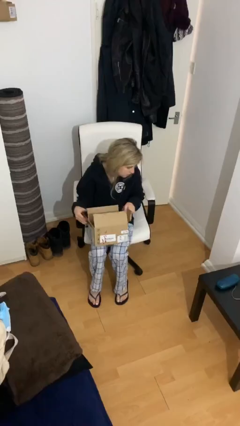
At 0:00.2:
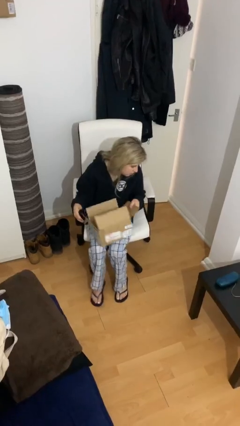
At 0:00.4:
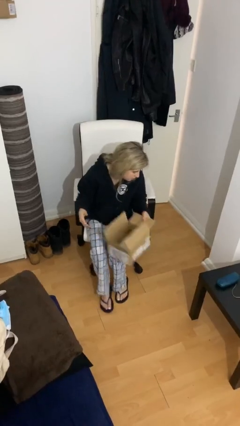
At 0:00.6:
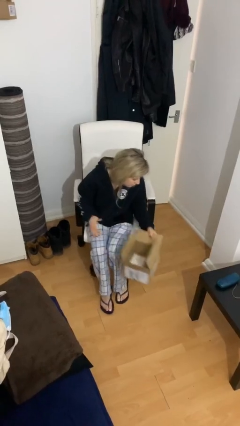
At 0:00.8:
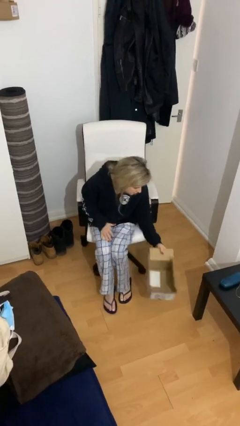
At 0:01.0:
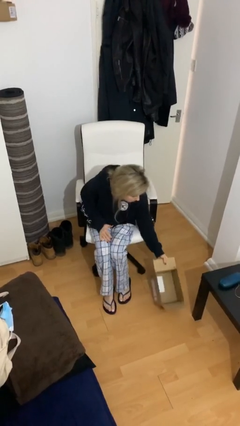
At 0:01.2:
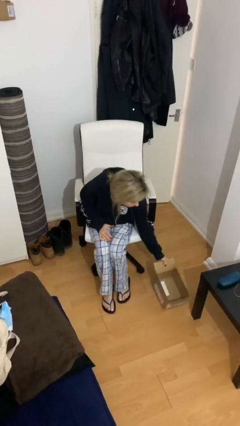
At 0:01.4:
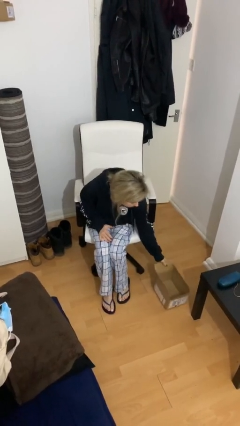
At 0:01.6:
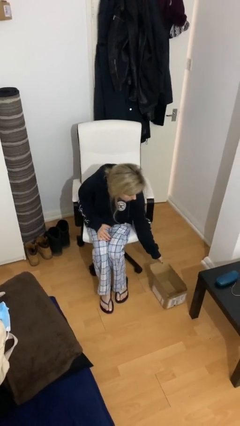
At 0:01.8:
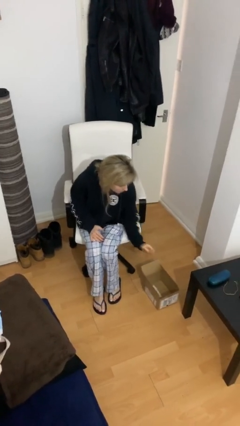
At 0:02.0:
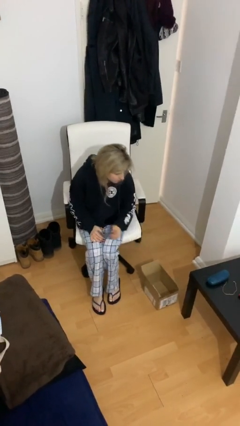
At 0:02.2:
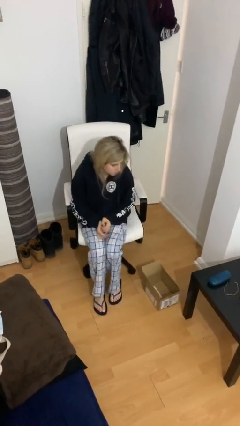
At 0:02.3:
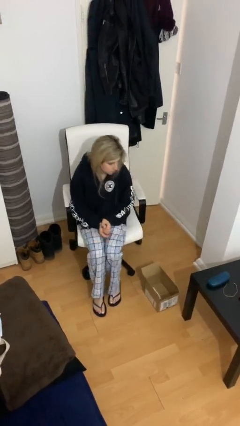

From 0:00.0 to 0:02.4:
person puts down object on floor

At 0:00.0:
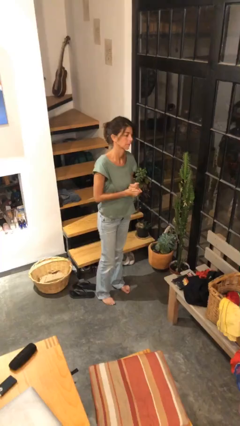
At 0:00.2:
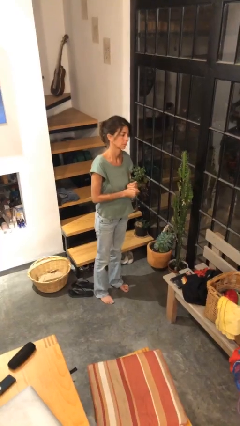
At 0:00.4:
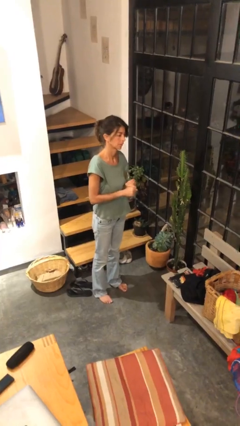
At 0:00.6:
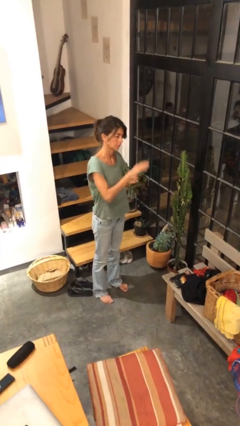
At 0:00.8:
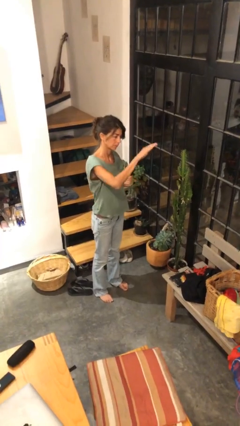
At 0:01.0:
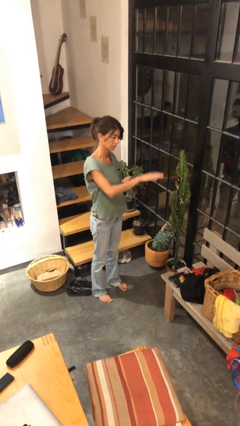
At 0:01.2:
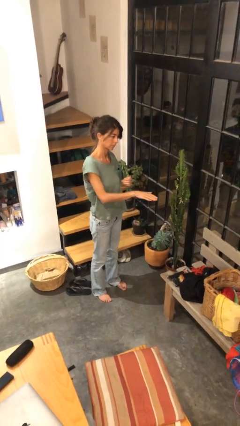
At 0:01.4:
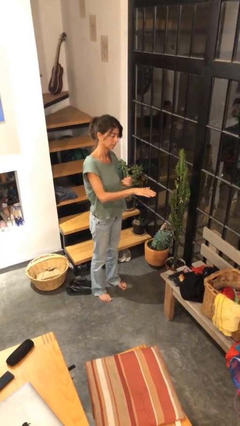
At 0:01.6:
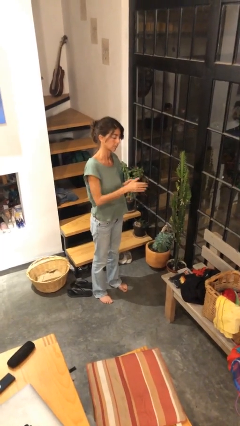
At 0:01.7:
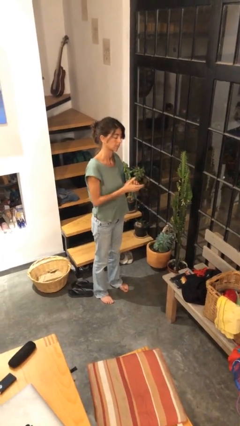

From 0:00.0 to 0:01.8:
person gestures swipe down

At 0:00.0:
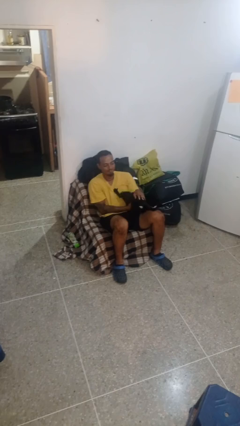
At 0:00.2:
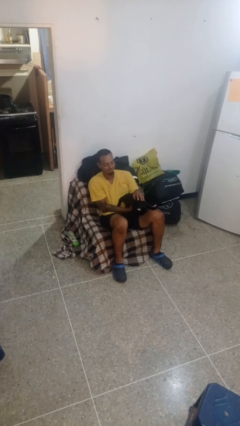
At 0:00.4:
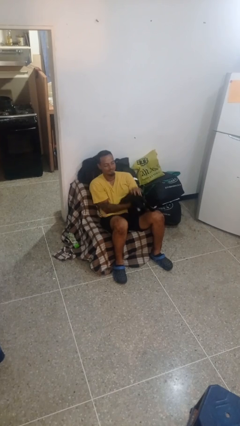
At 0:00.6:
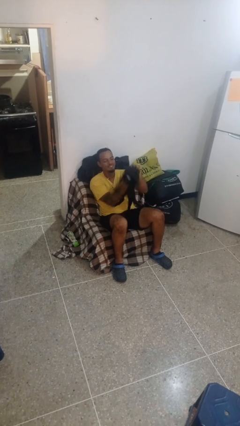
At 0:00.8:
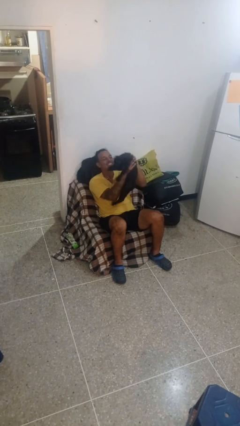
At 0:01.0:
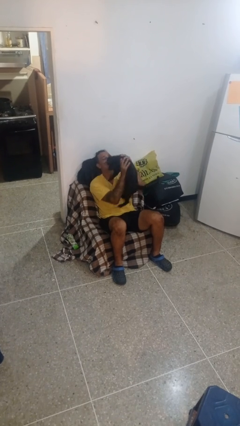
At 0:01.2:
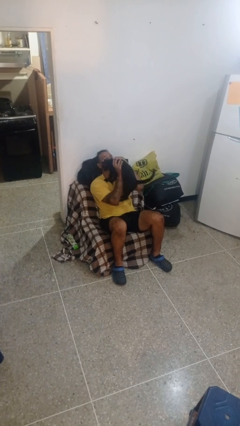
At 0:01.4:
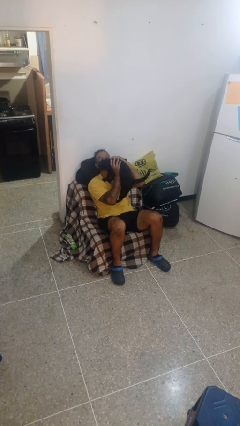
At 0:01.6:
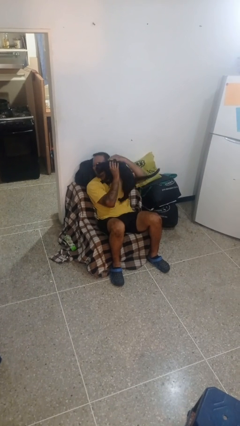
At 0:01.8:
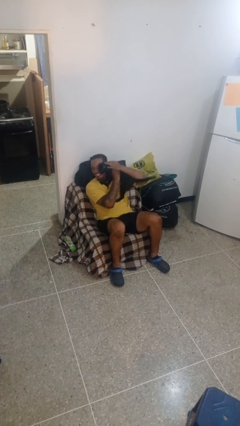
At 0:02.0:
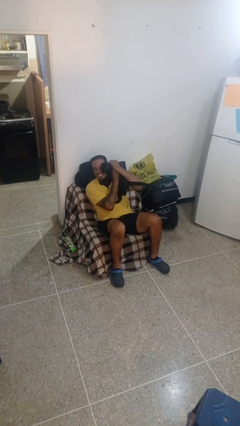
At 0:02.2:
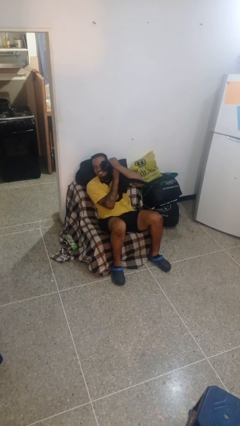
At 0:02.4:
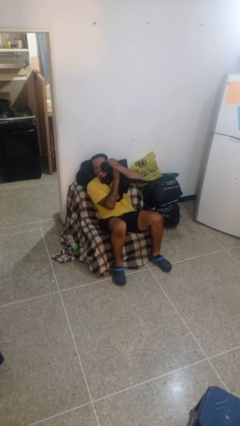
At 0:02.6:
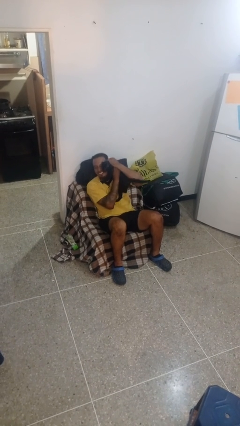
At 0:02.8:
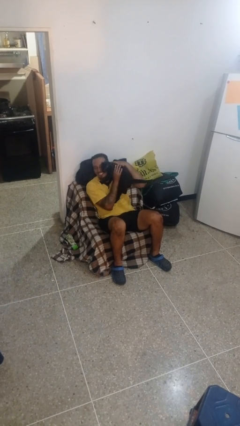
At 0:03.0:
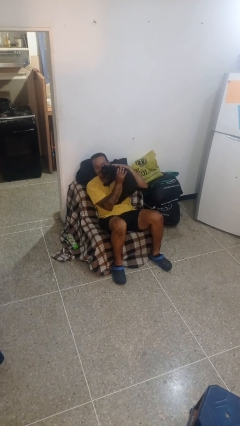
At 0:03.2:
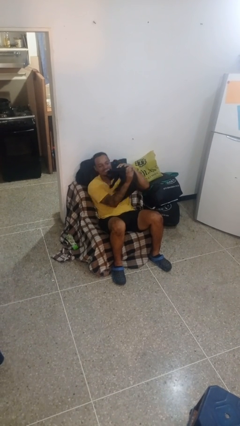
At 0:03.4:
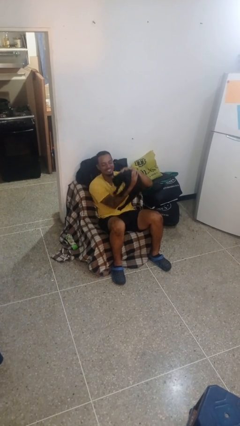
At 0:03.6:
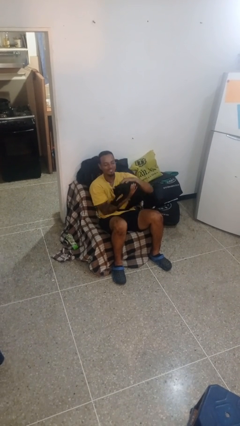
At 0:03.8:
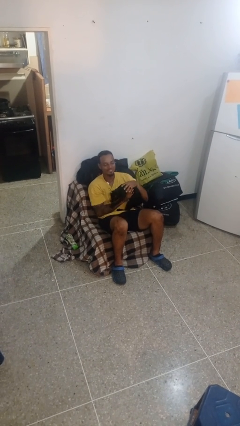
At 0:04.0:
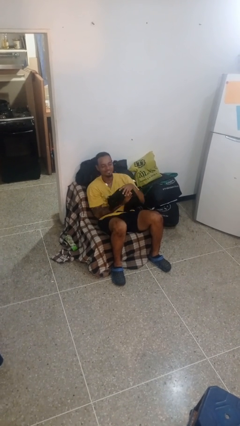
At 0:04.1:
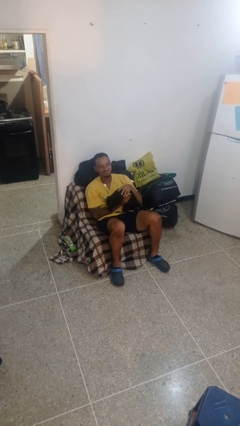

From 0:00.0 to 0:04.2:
person hugs cat

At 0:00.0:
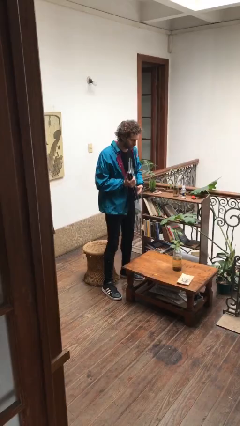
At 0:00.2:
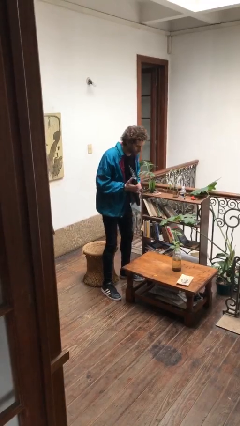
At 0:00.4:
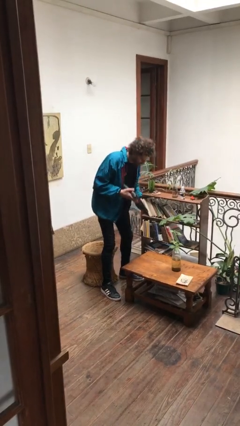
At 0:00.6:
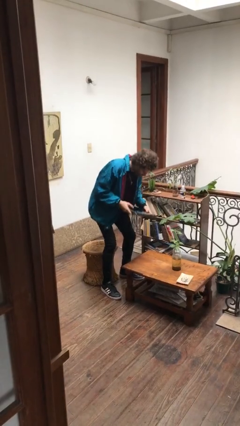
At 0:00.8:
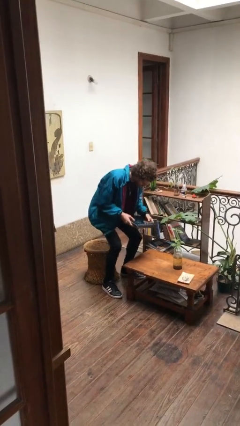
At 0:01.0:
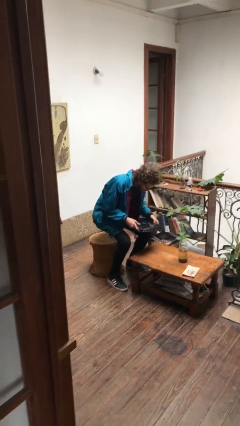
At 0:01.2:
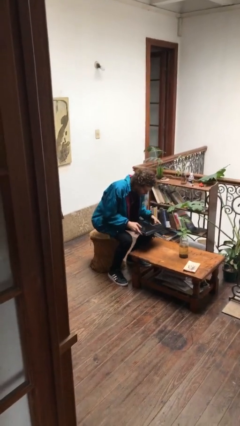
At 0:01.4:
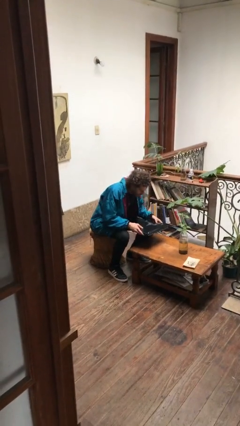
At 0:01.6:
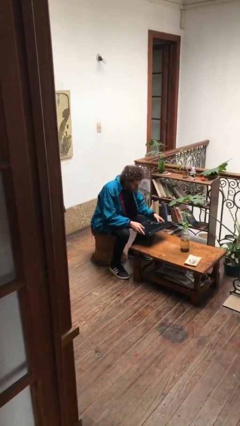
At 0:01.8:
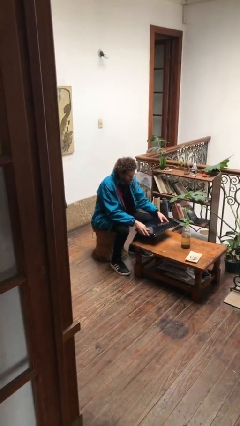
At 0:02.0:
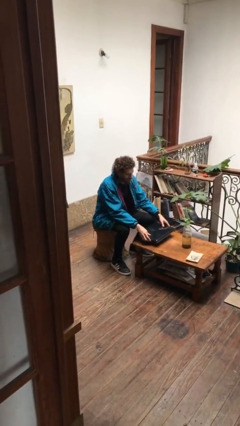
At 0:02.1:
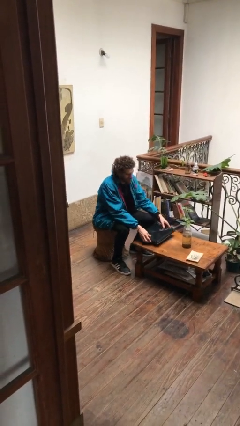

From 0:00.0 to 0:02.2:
person sits down

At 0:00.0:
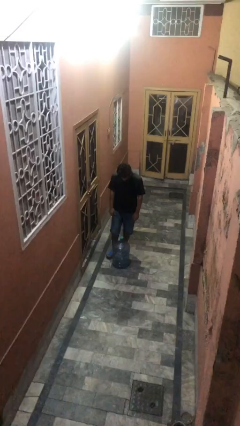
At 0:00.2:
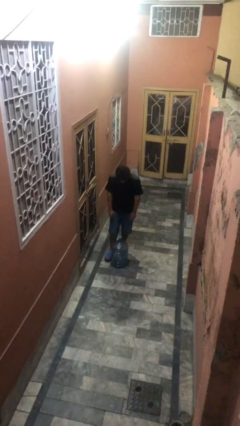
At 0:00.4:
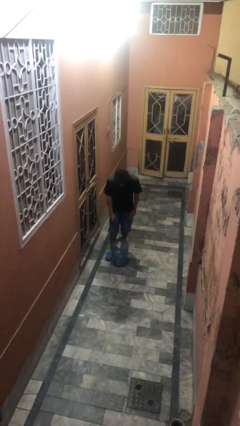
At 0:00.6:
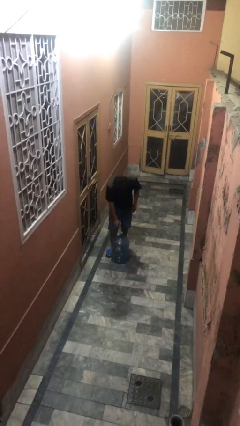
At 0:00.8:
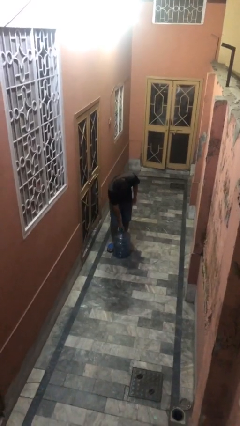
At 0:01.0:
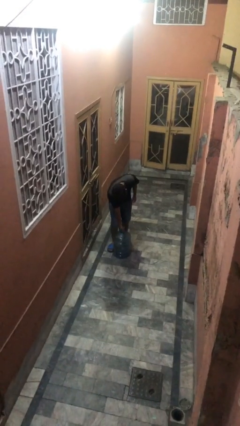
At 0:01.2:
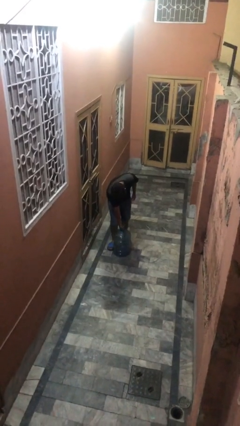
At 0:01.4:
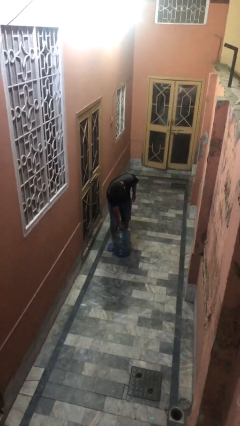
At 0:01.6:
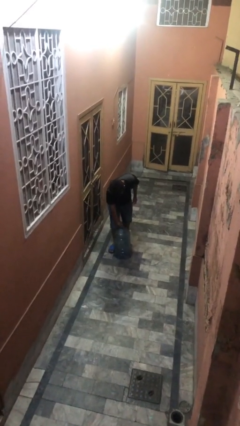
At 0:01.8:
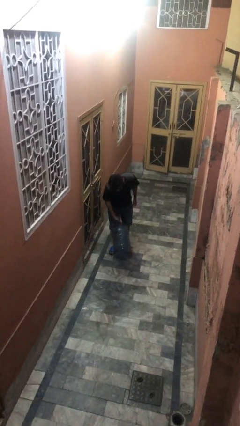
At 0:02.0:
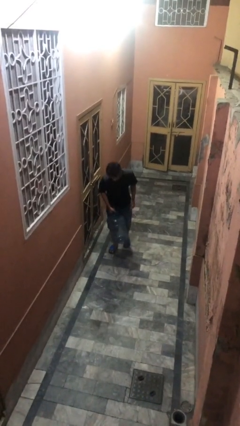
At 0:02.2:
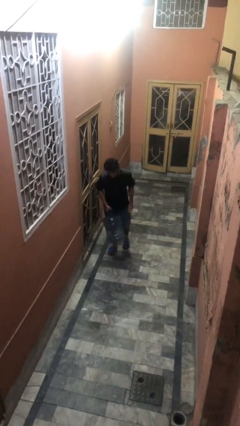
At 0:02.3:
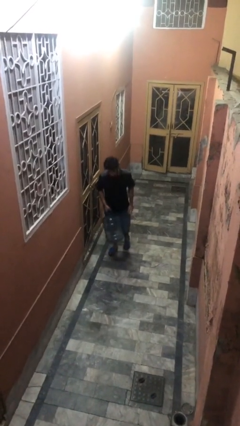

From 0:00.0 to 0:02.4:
person picks up object from floor

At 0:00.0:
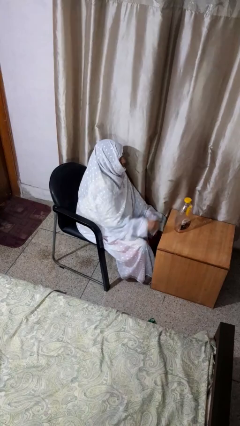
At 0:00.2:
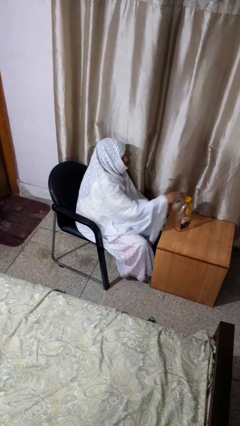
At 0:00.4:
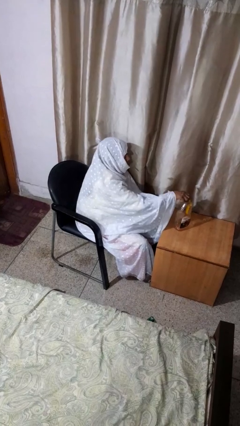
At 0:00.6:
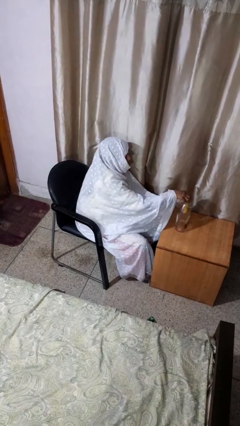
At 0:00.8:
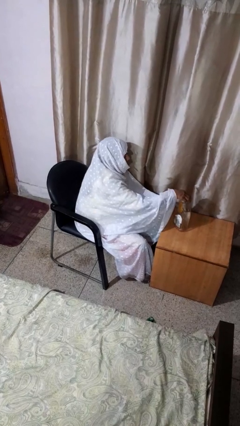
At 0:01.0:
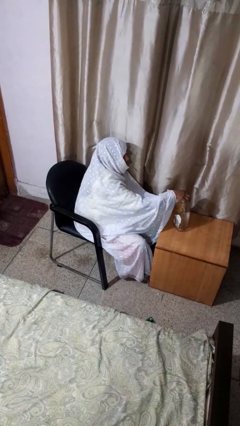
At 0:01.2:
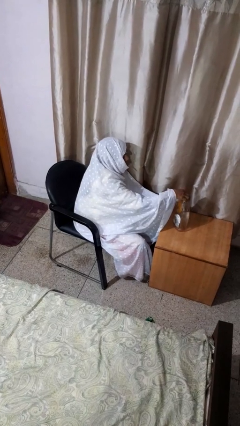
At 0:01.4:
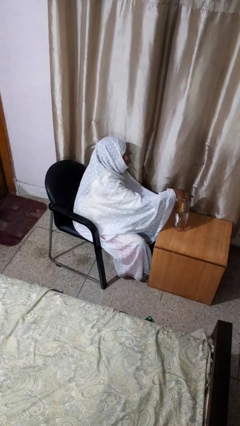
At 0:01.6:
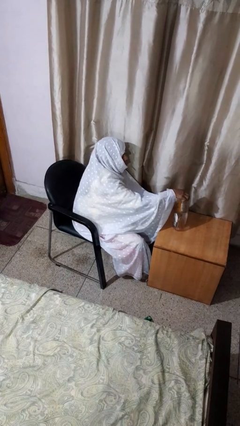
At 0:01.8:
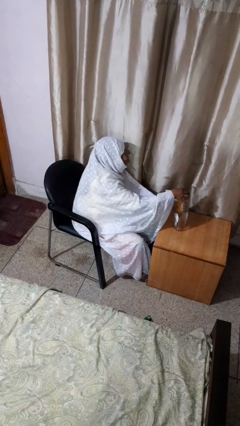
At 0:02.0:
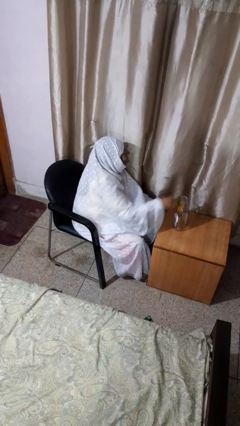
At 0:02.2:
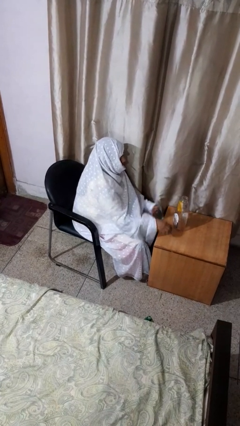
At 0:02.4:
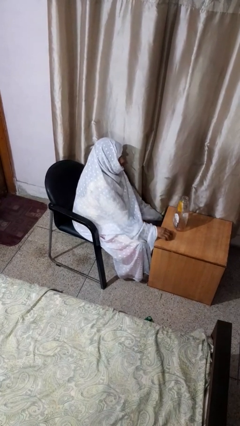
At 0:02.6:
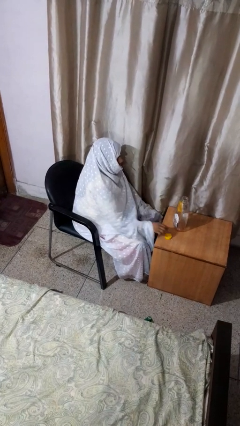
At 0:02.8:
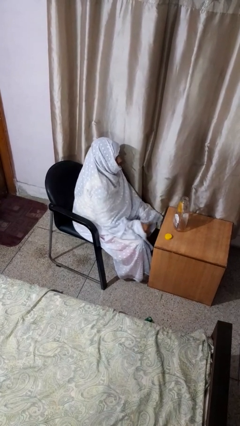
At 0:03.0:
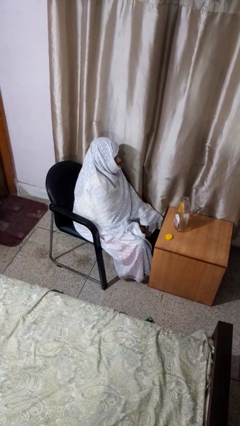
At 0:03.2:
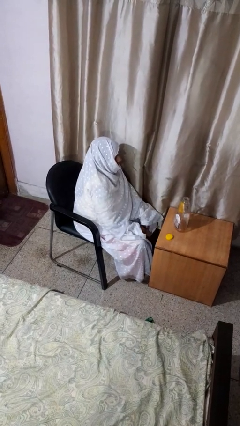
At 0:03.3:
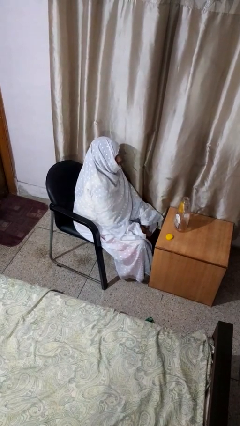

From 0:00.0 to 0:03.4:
person unscrews lid from bottle

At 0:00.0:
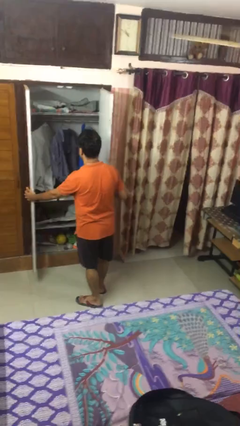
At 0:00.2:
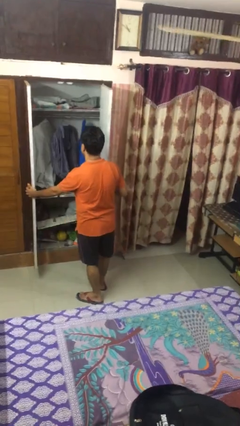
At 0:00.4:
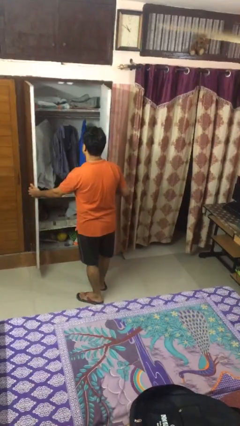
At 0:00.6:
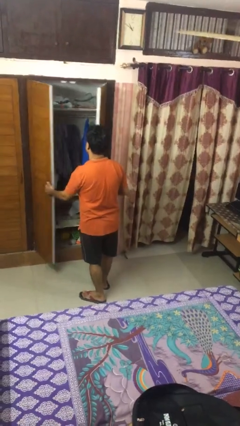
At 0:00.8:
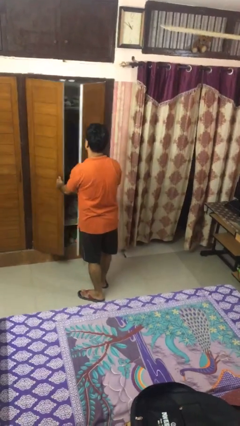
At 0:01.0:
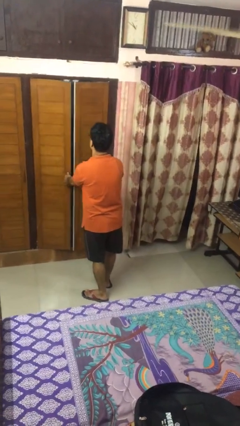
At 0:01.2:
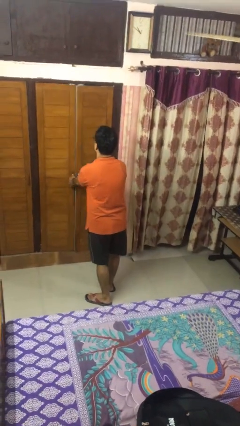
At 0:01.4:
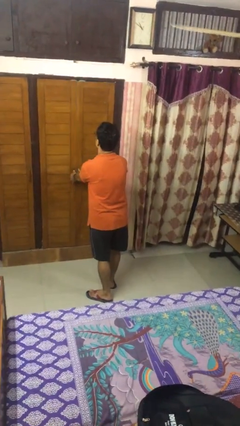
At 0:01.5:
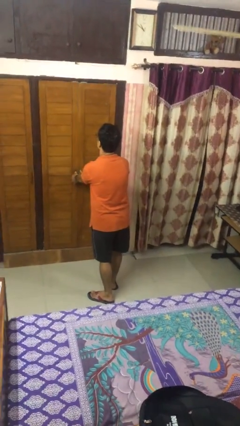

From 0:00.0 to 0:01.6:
person closes closet door
